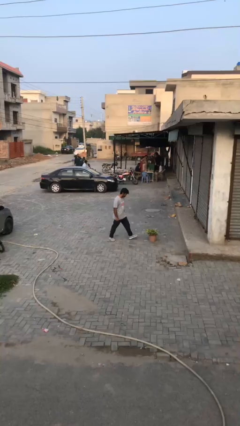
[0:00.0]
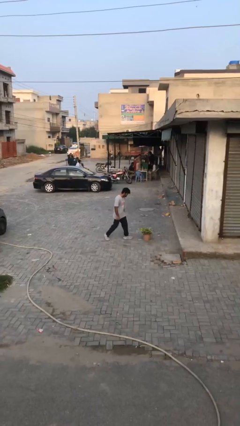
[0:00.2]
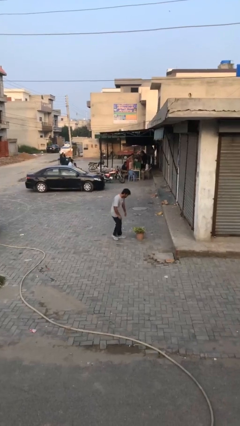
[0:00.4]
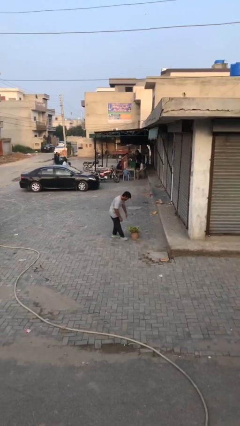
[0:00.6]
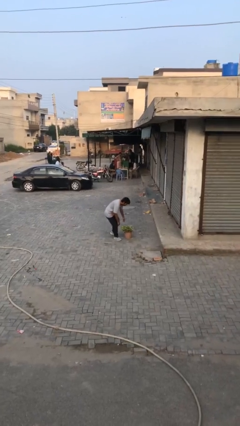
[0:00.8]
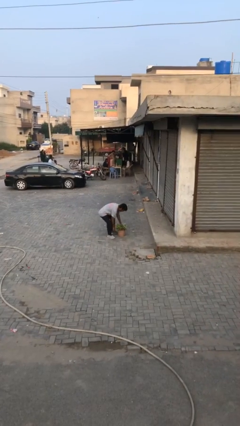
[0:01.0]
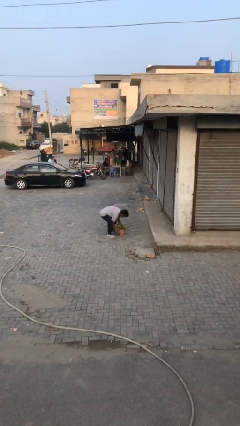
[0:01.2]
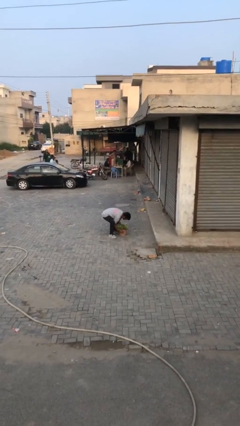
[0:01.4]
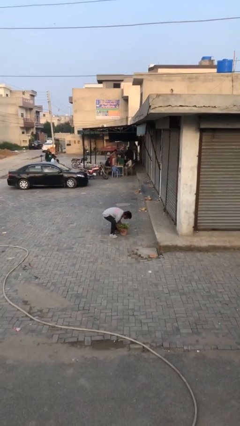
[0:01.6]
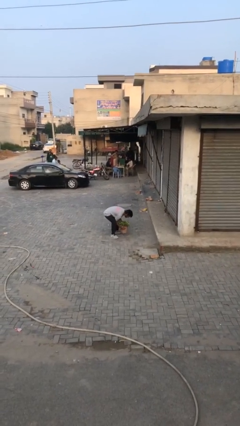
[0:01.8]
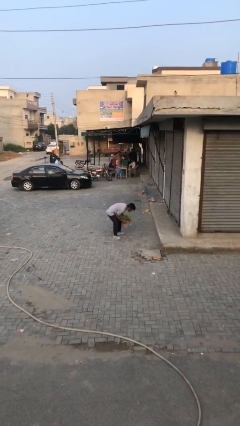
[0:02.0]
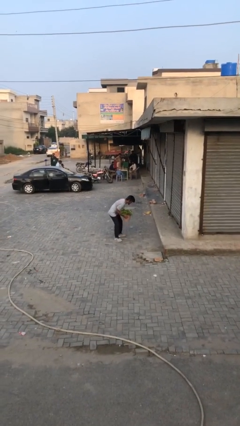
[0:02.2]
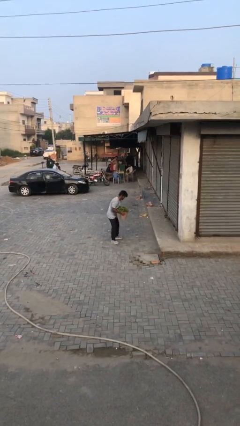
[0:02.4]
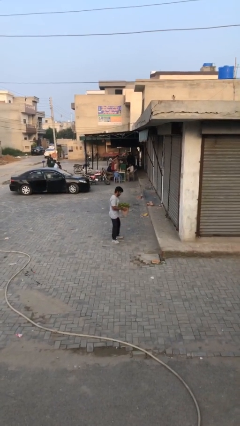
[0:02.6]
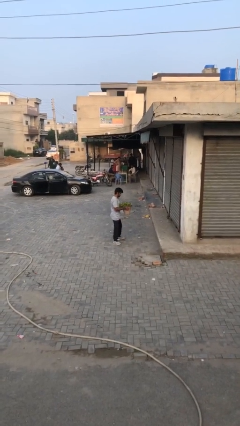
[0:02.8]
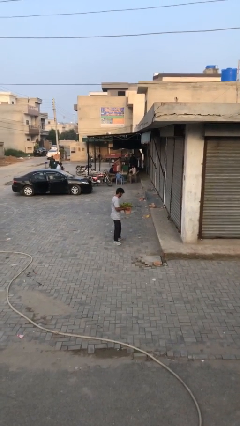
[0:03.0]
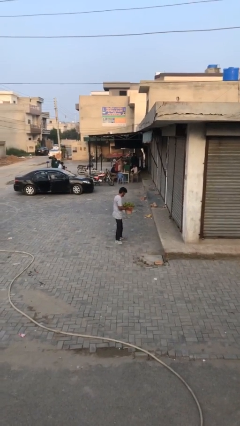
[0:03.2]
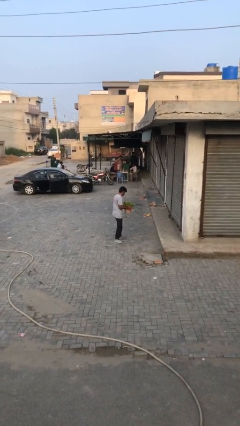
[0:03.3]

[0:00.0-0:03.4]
person picks up object from floor

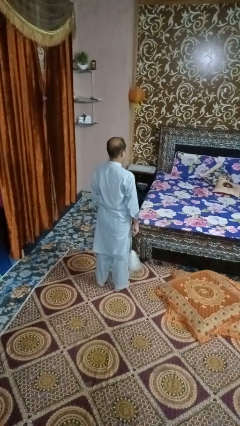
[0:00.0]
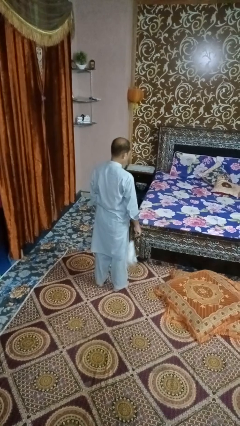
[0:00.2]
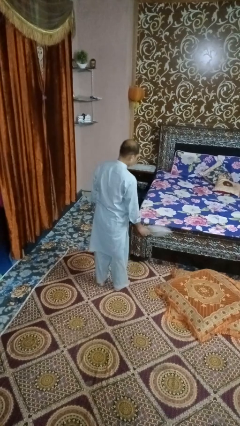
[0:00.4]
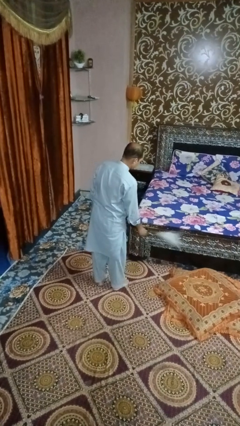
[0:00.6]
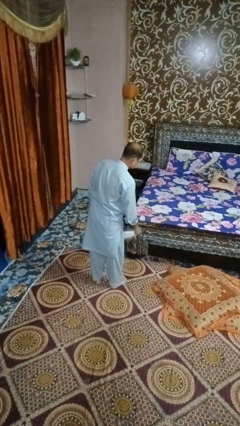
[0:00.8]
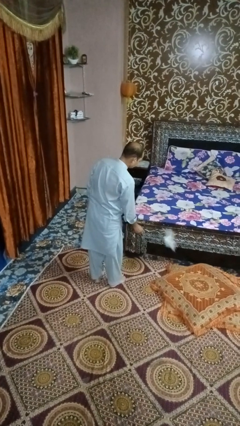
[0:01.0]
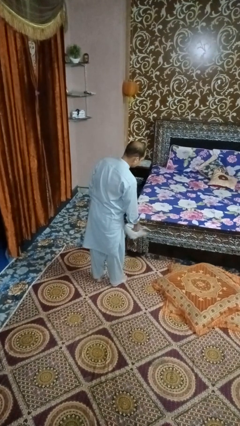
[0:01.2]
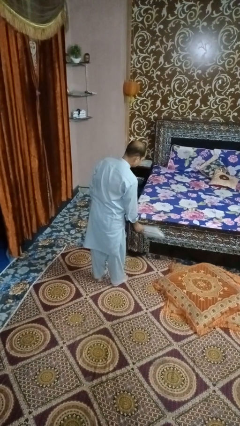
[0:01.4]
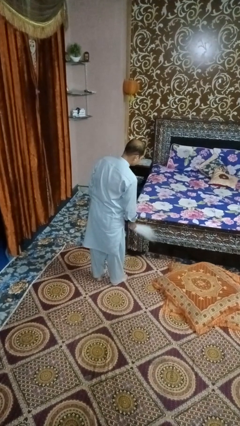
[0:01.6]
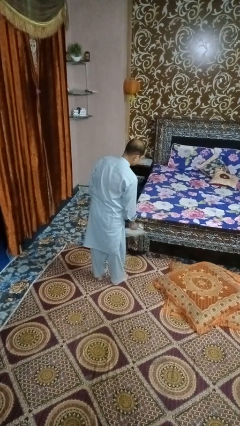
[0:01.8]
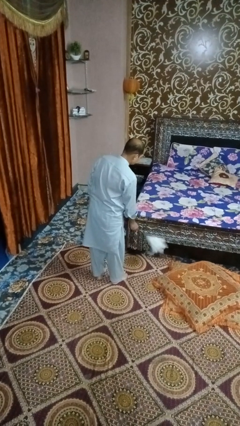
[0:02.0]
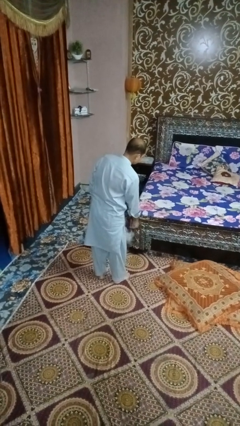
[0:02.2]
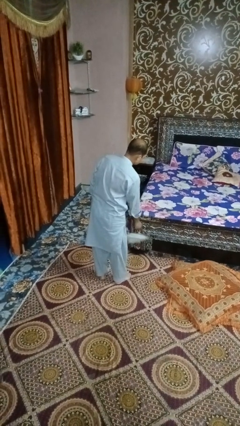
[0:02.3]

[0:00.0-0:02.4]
person dusts furniture

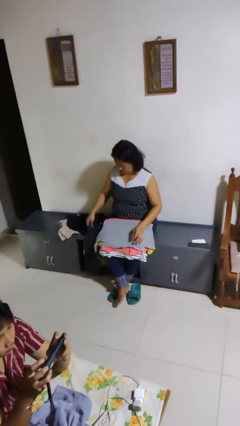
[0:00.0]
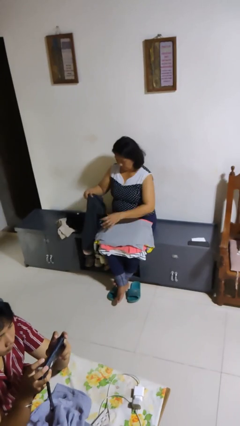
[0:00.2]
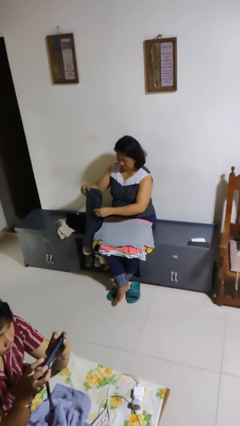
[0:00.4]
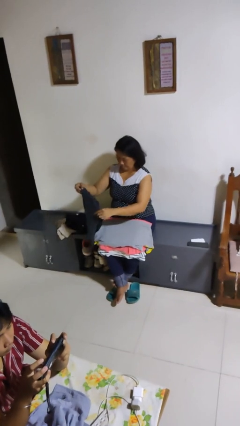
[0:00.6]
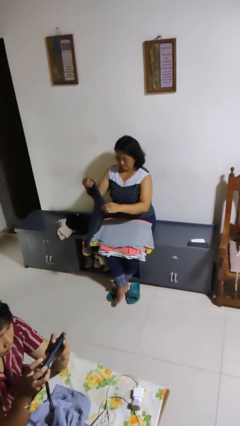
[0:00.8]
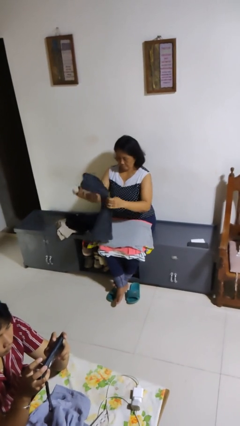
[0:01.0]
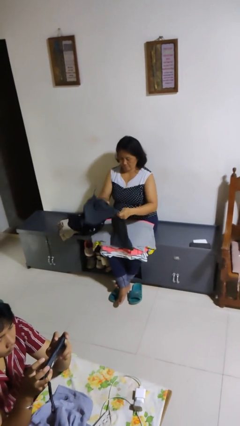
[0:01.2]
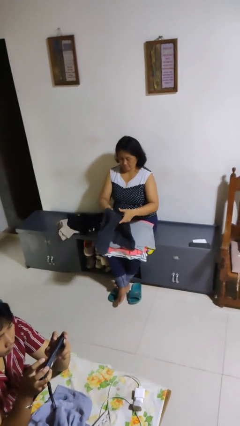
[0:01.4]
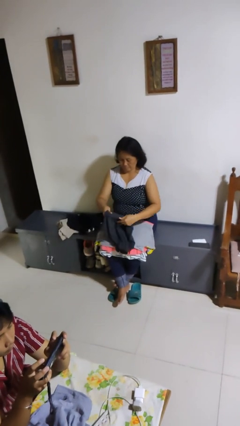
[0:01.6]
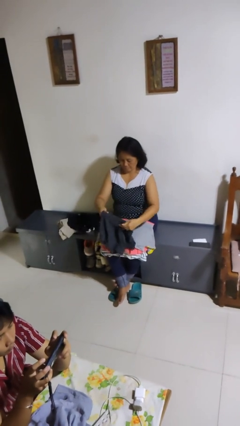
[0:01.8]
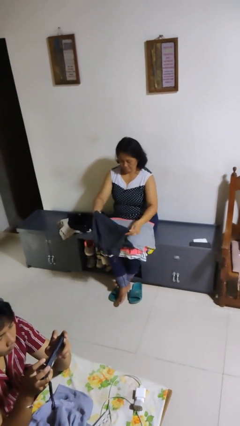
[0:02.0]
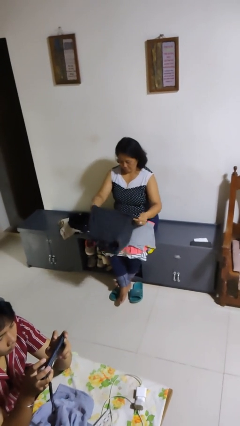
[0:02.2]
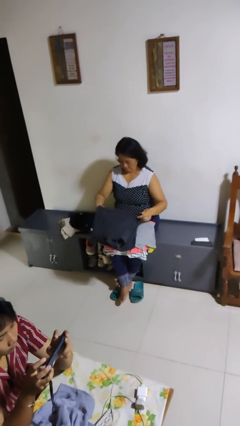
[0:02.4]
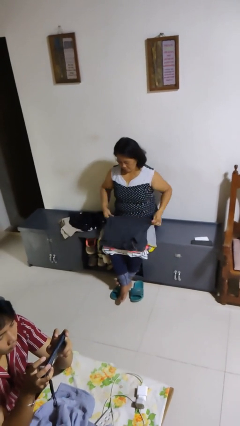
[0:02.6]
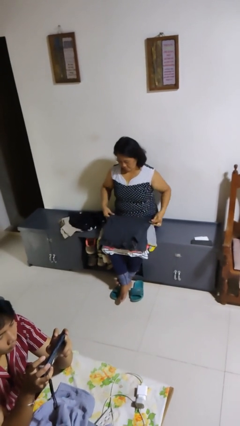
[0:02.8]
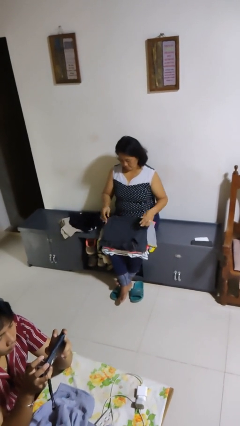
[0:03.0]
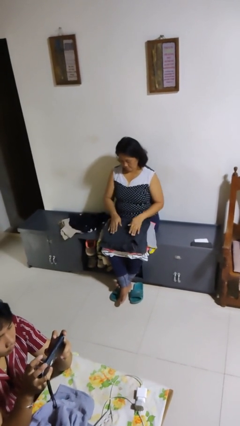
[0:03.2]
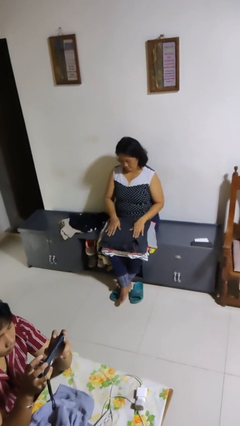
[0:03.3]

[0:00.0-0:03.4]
person folds shirt

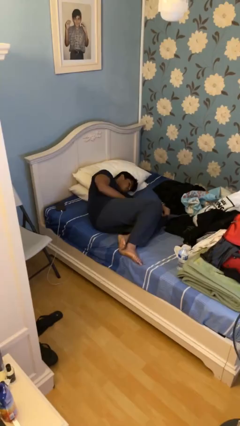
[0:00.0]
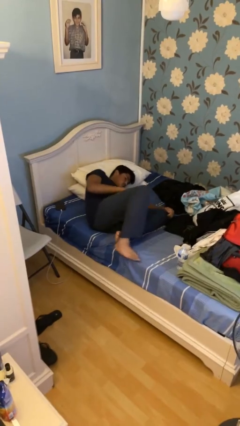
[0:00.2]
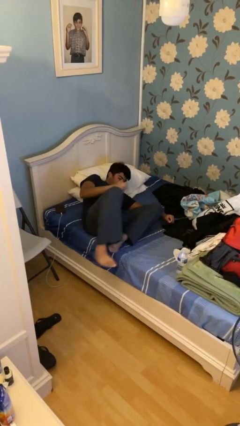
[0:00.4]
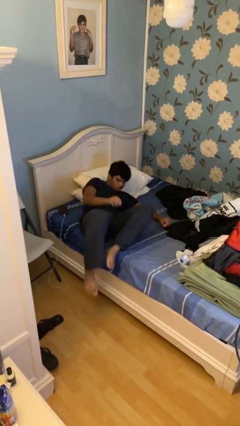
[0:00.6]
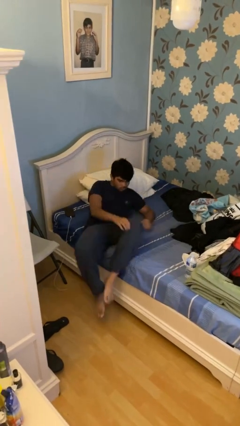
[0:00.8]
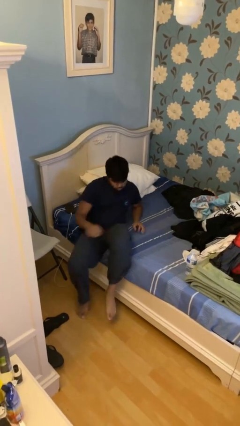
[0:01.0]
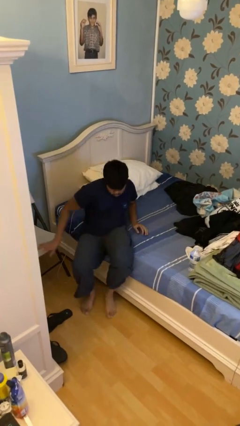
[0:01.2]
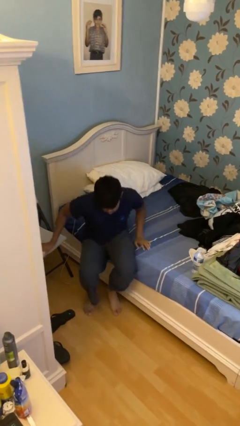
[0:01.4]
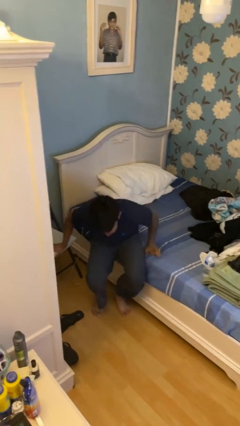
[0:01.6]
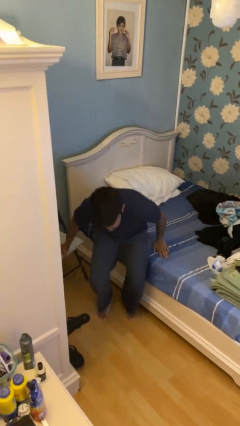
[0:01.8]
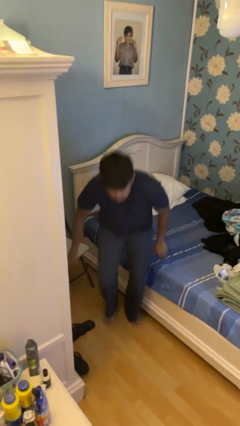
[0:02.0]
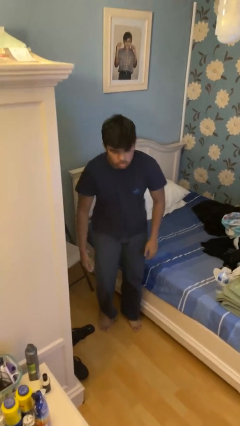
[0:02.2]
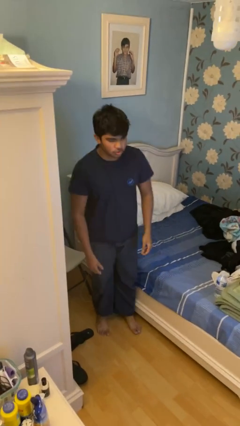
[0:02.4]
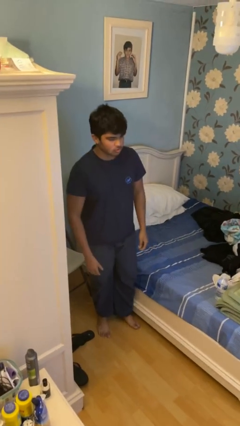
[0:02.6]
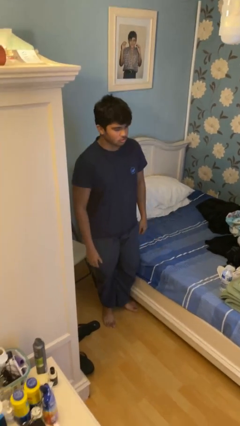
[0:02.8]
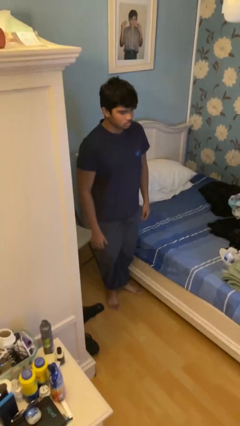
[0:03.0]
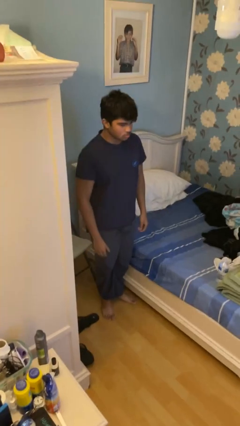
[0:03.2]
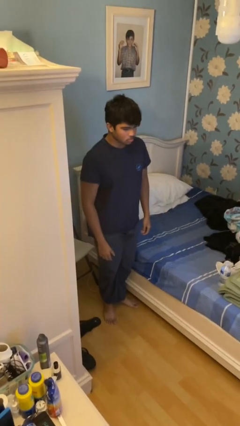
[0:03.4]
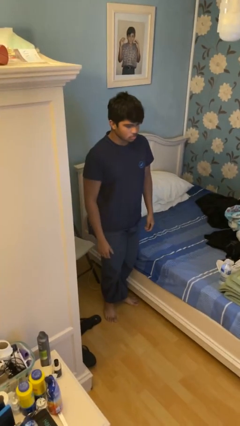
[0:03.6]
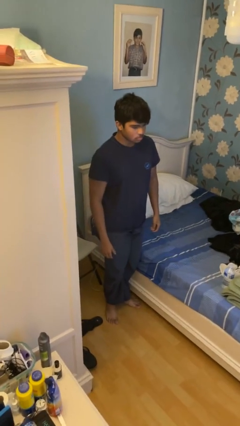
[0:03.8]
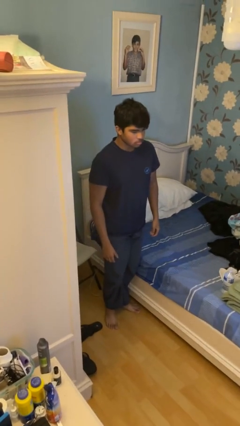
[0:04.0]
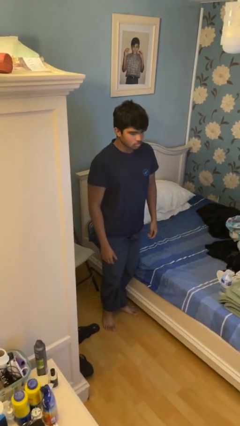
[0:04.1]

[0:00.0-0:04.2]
person stands up

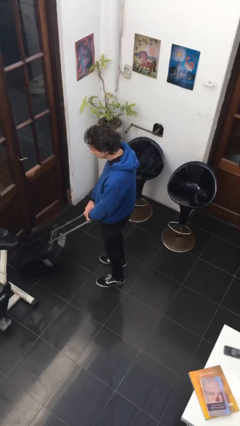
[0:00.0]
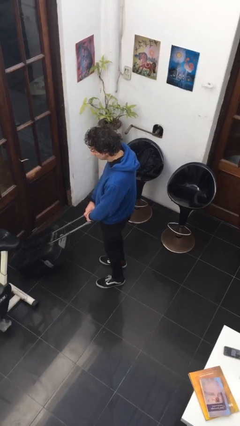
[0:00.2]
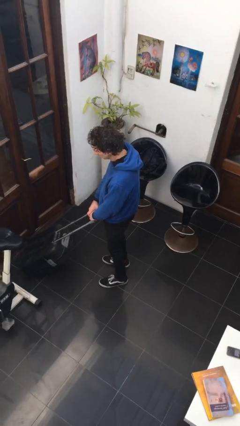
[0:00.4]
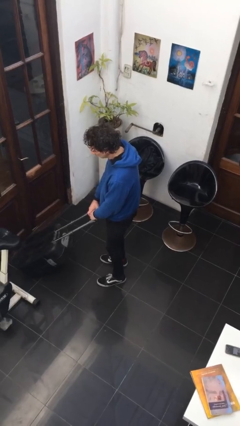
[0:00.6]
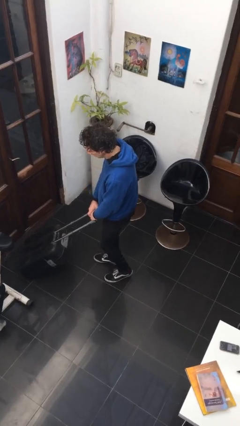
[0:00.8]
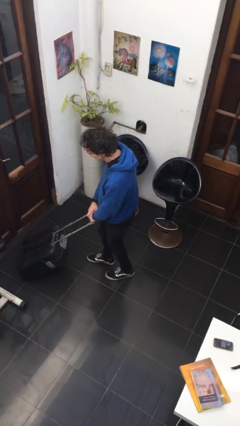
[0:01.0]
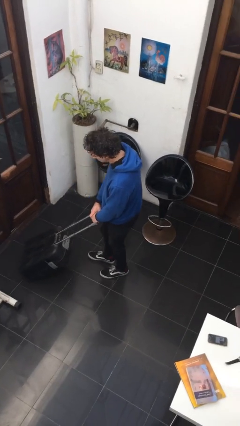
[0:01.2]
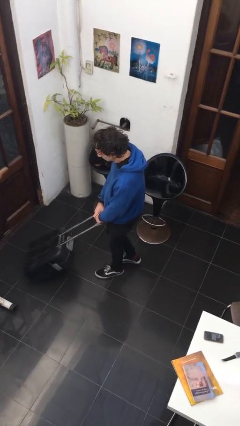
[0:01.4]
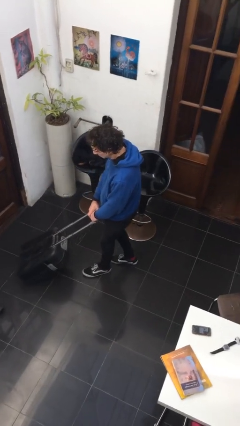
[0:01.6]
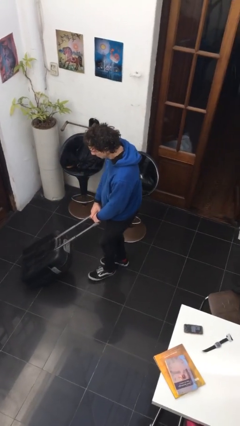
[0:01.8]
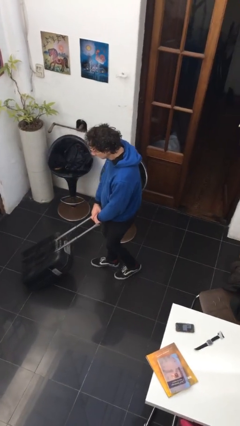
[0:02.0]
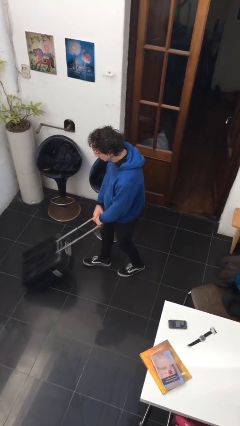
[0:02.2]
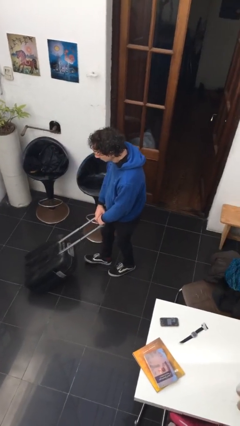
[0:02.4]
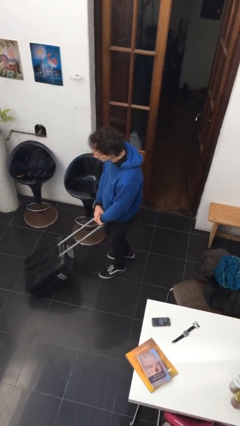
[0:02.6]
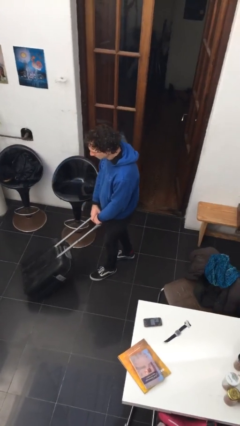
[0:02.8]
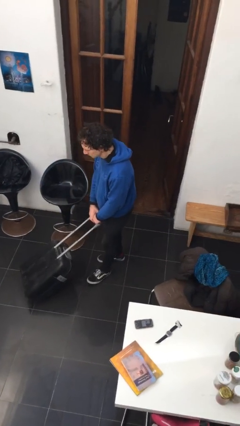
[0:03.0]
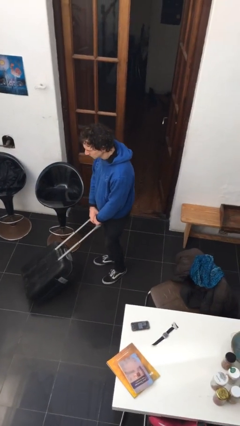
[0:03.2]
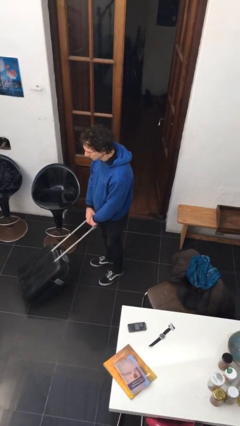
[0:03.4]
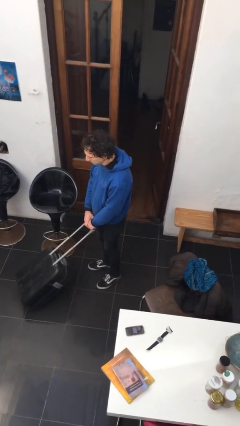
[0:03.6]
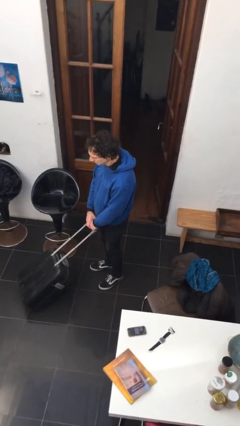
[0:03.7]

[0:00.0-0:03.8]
person pulls wheeled cart

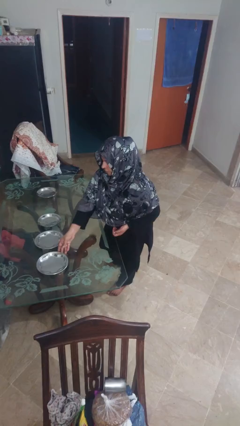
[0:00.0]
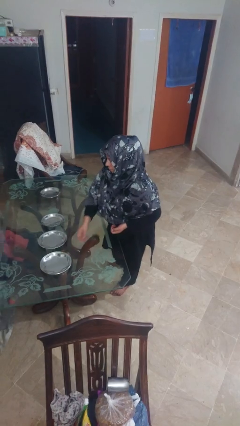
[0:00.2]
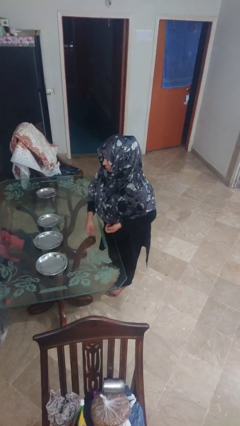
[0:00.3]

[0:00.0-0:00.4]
person sets table
